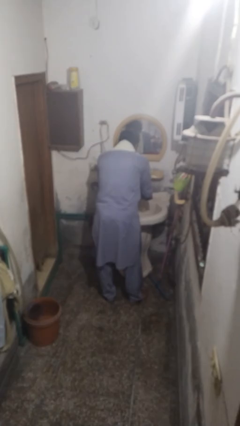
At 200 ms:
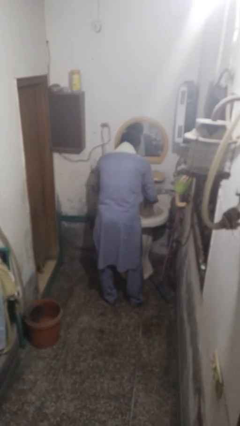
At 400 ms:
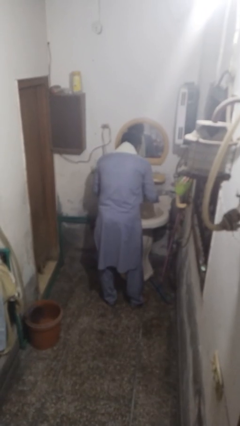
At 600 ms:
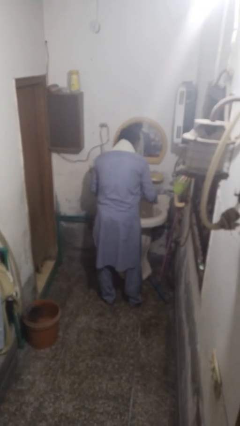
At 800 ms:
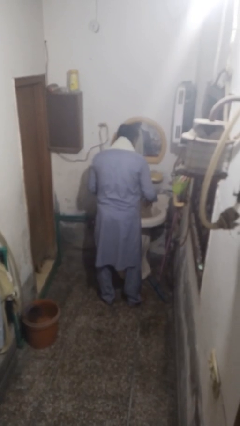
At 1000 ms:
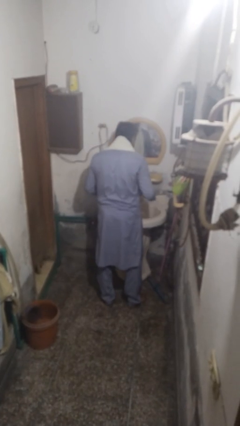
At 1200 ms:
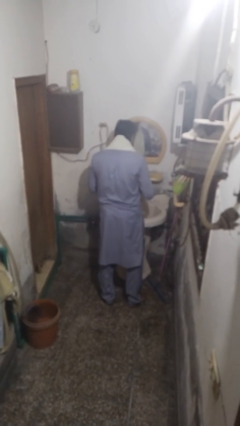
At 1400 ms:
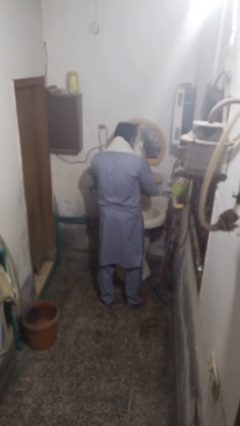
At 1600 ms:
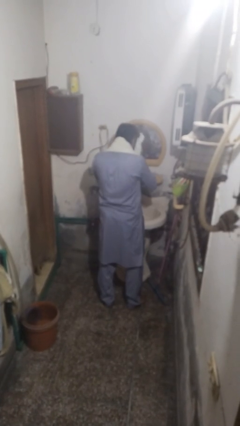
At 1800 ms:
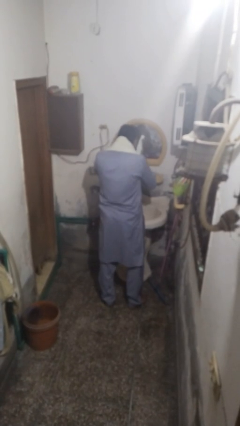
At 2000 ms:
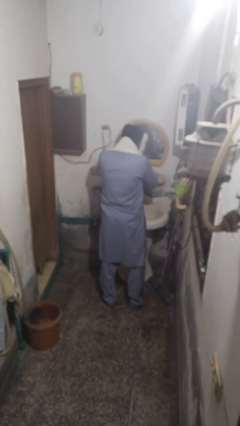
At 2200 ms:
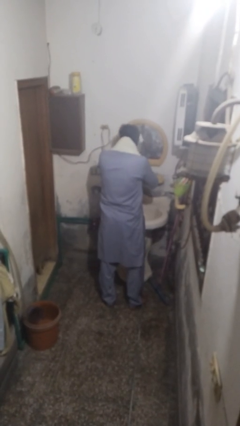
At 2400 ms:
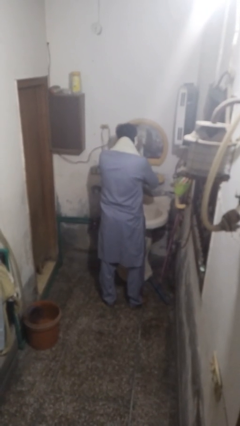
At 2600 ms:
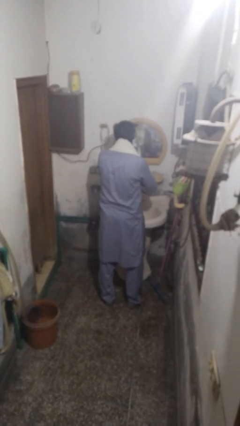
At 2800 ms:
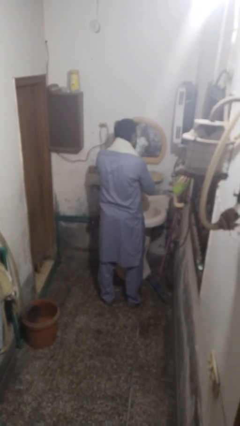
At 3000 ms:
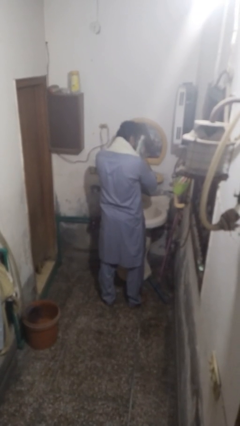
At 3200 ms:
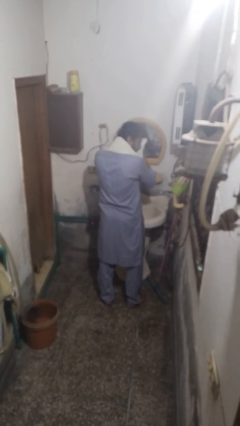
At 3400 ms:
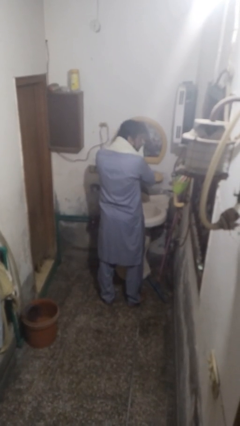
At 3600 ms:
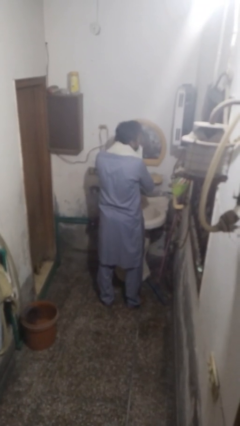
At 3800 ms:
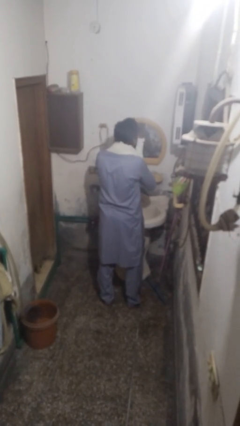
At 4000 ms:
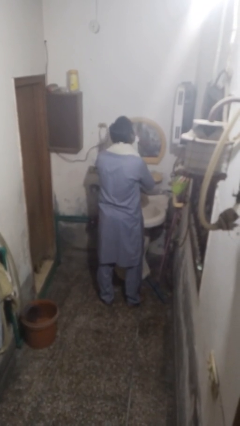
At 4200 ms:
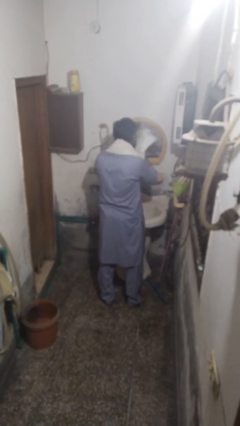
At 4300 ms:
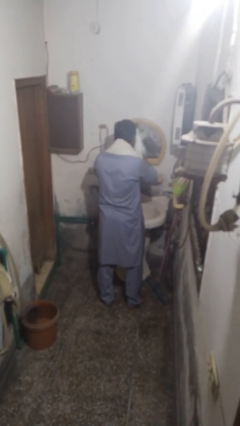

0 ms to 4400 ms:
person dries face with towel

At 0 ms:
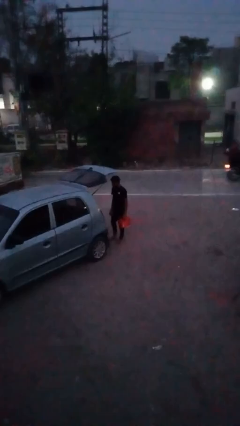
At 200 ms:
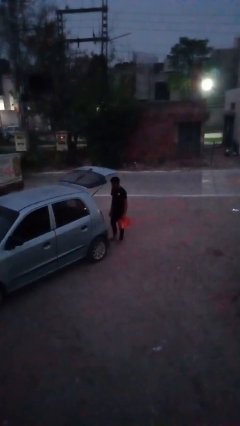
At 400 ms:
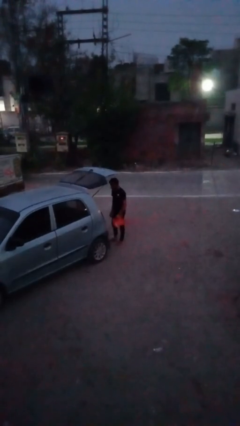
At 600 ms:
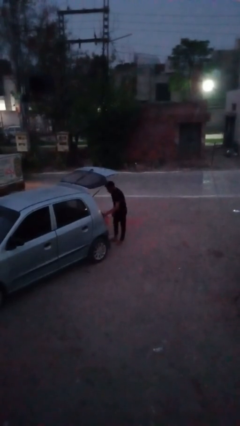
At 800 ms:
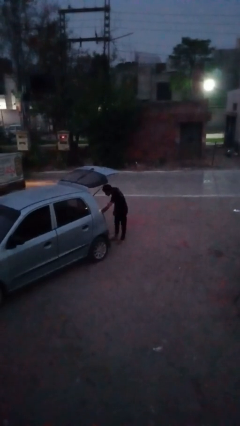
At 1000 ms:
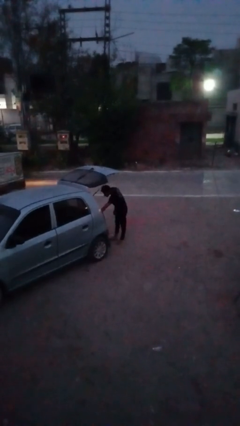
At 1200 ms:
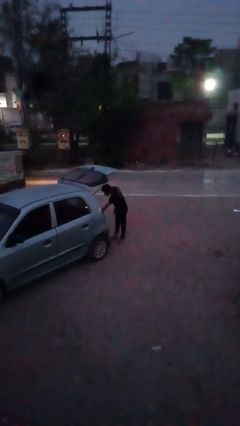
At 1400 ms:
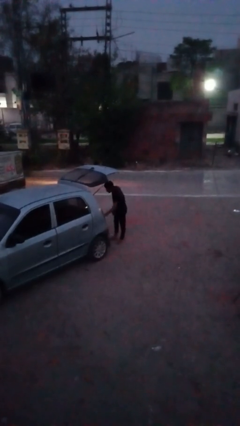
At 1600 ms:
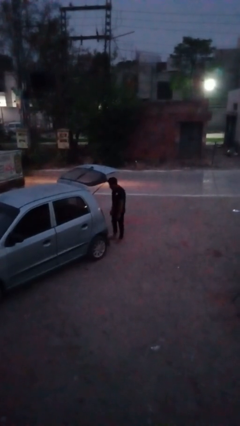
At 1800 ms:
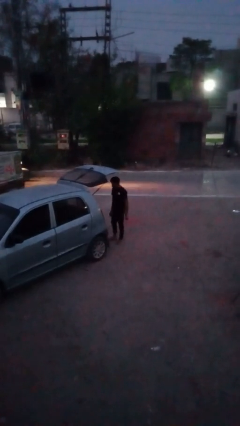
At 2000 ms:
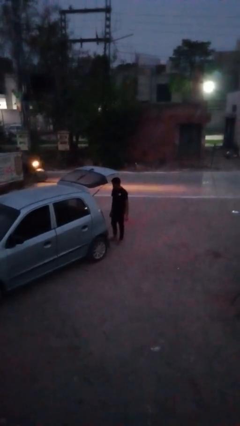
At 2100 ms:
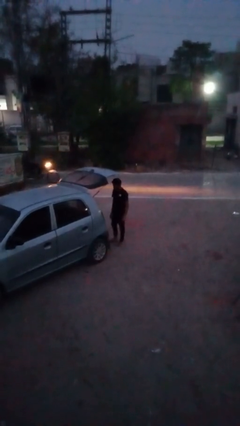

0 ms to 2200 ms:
person loads car

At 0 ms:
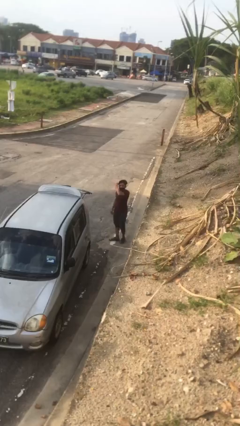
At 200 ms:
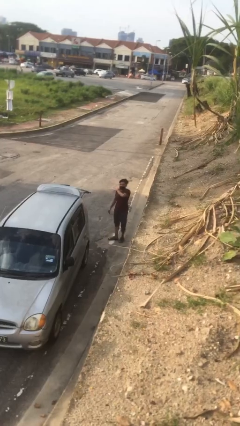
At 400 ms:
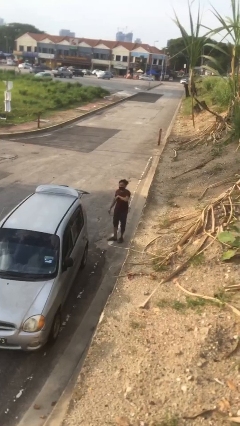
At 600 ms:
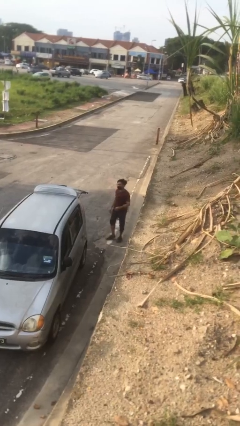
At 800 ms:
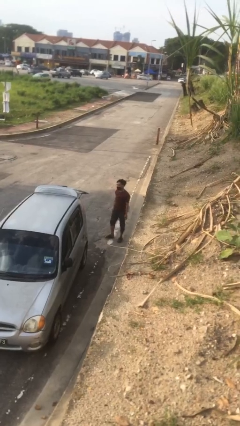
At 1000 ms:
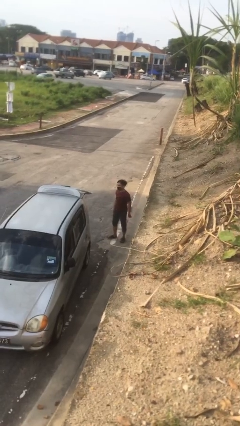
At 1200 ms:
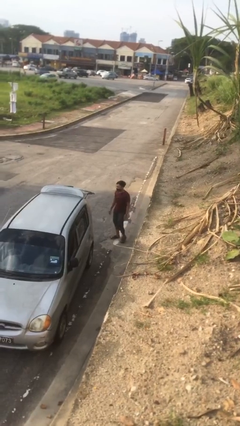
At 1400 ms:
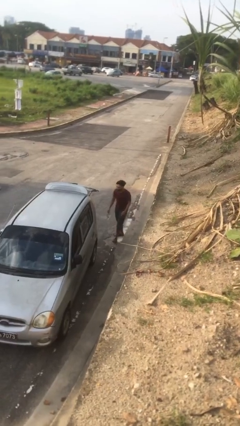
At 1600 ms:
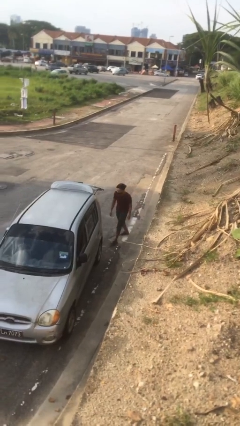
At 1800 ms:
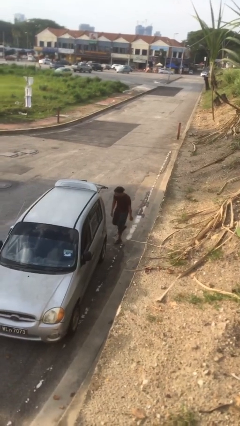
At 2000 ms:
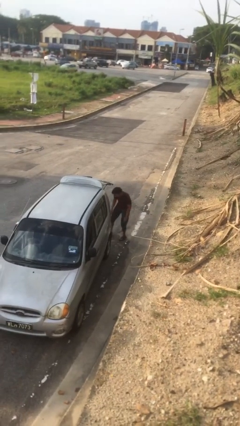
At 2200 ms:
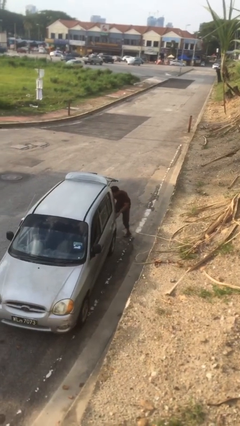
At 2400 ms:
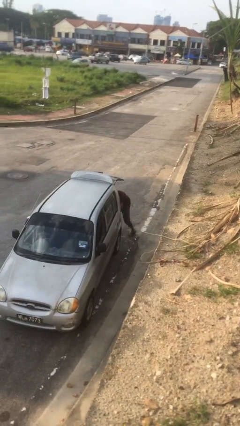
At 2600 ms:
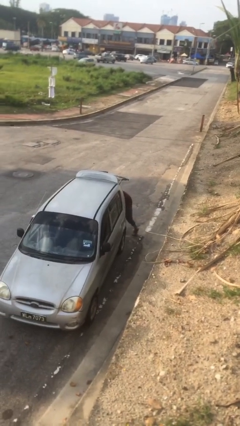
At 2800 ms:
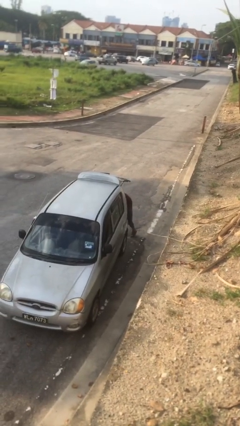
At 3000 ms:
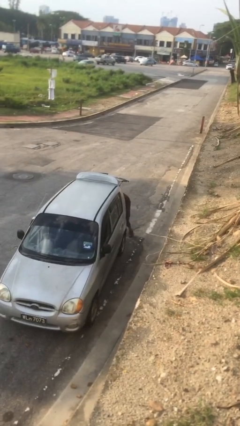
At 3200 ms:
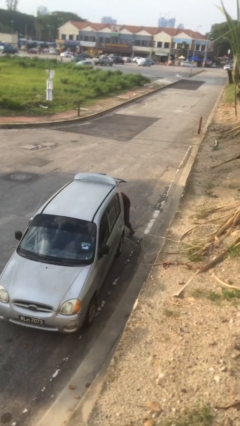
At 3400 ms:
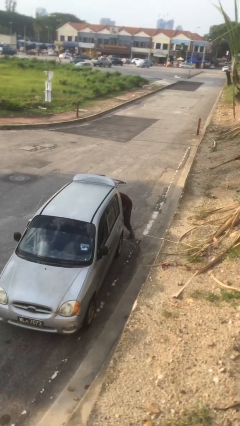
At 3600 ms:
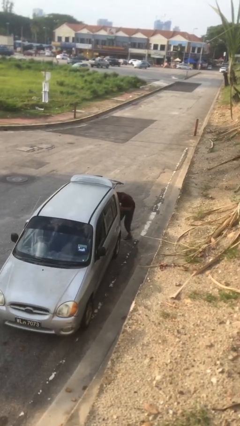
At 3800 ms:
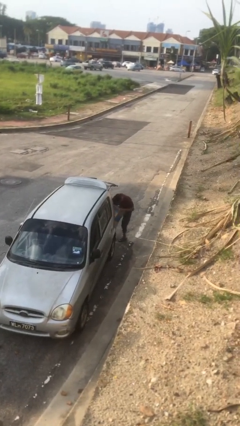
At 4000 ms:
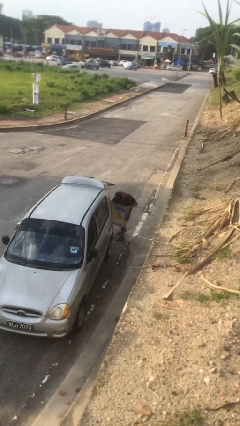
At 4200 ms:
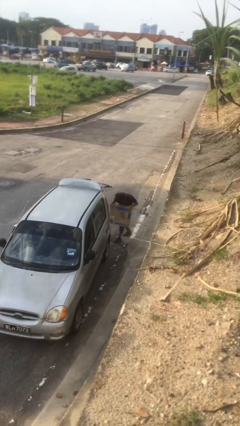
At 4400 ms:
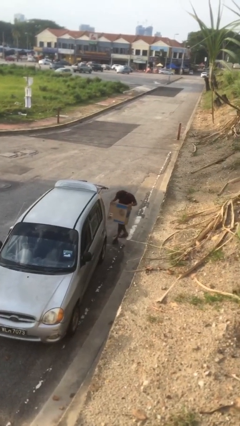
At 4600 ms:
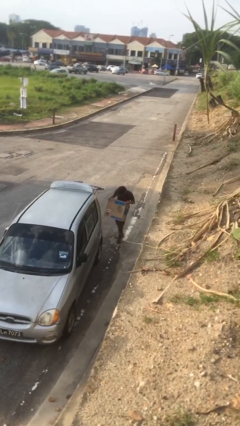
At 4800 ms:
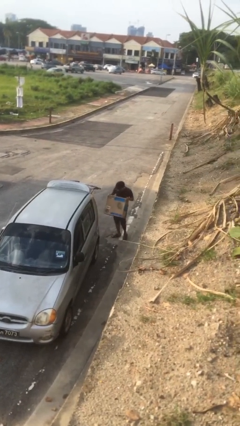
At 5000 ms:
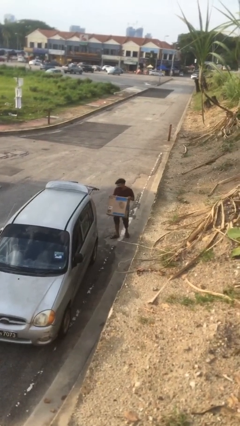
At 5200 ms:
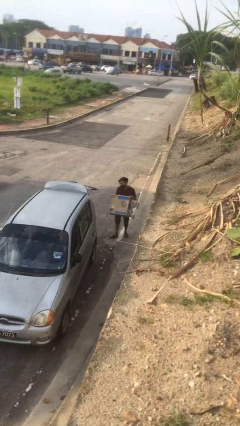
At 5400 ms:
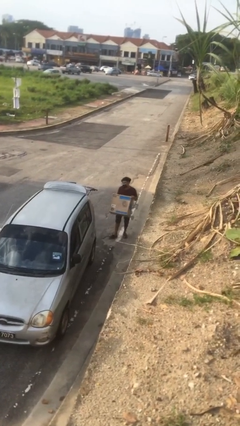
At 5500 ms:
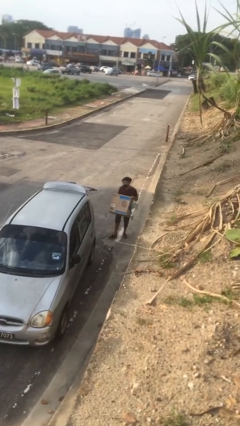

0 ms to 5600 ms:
person unloads car

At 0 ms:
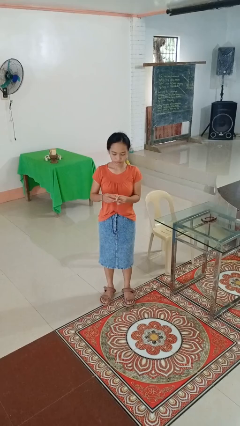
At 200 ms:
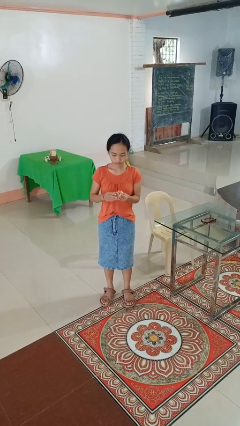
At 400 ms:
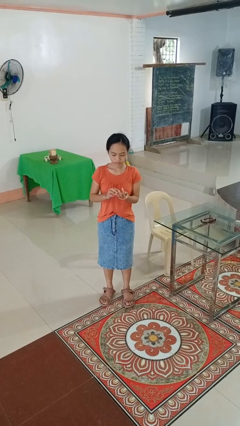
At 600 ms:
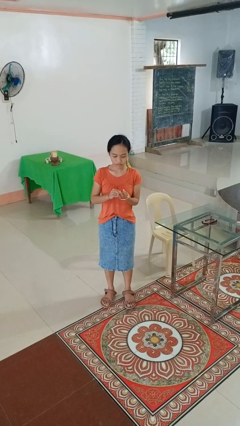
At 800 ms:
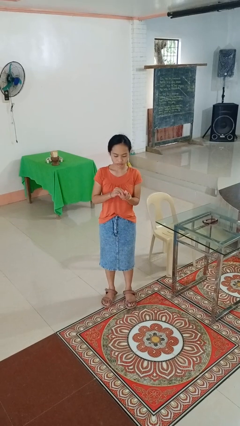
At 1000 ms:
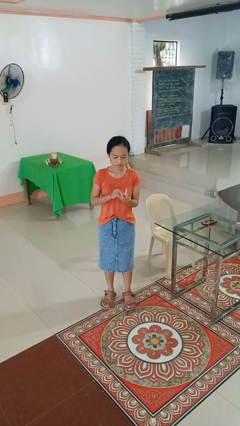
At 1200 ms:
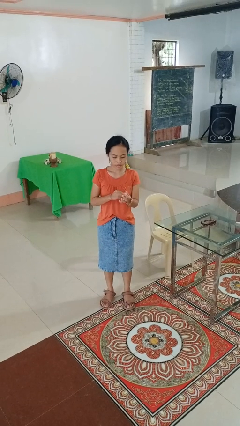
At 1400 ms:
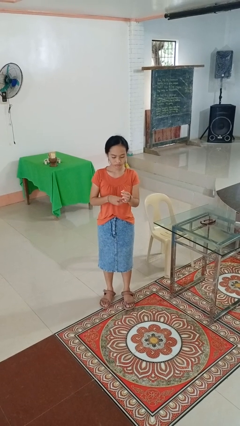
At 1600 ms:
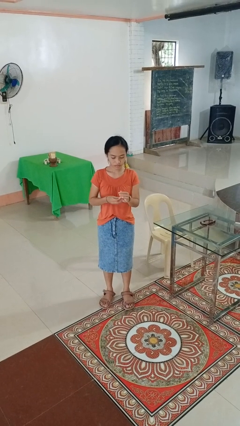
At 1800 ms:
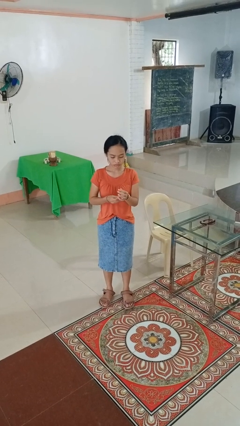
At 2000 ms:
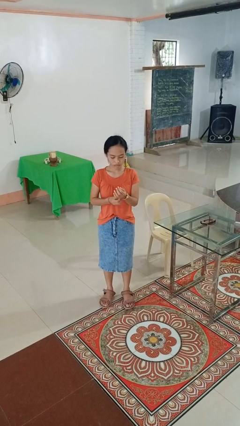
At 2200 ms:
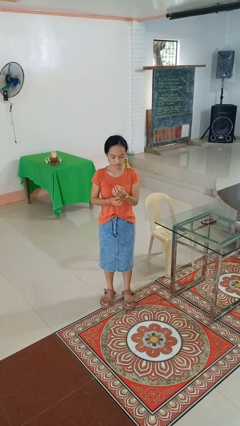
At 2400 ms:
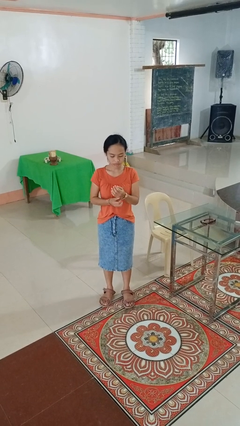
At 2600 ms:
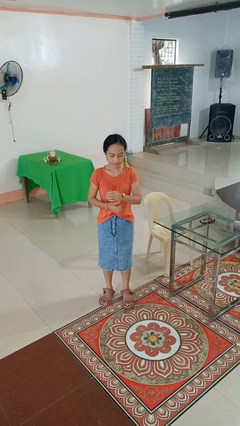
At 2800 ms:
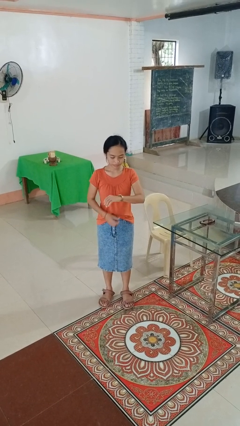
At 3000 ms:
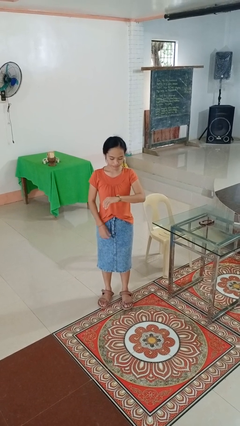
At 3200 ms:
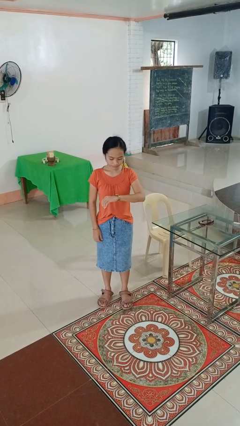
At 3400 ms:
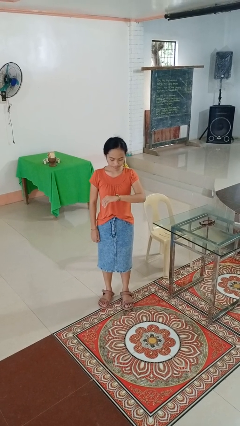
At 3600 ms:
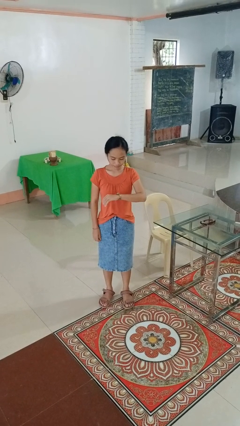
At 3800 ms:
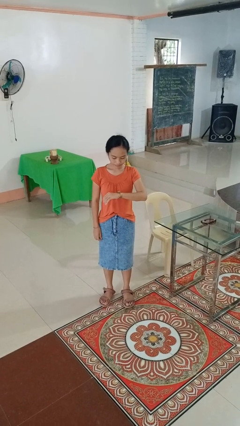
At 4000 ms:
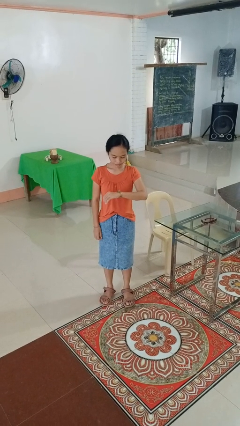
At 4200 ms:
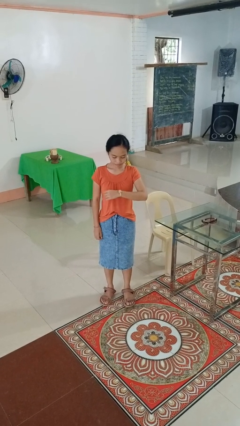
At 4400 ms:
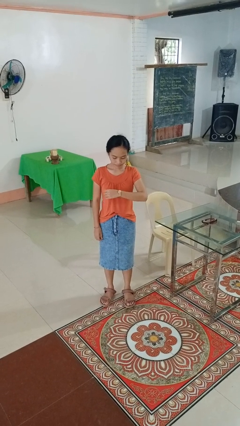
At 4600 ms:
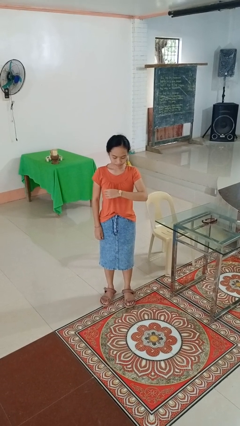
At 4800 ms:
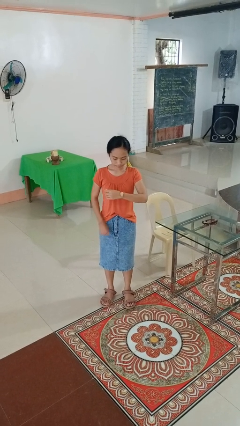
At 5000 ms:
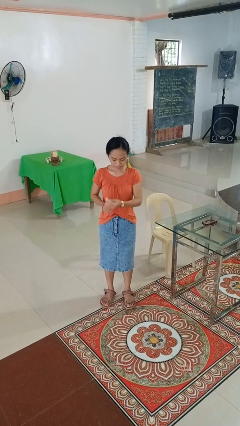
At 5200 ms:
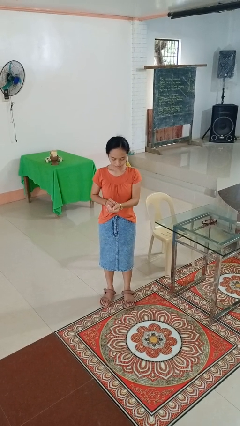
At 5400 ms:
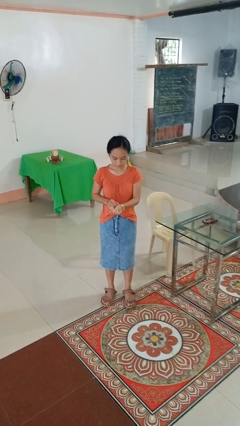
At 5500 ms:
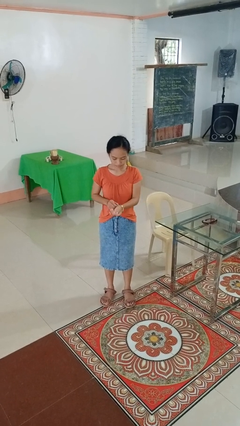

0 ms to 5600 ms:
person puts on wristwatch
